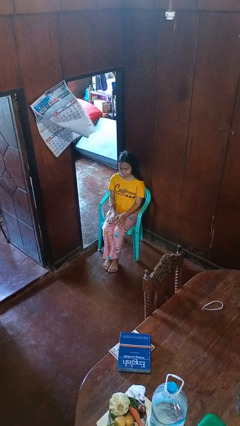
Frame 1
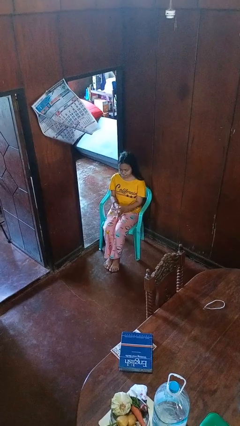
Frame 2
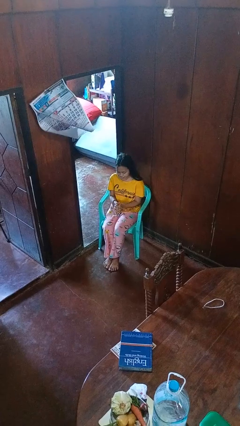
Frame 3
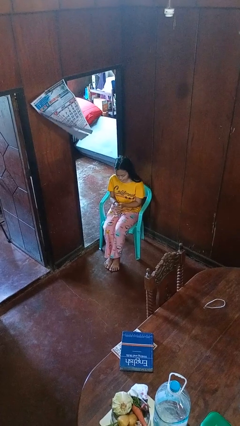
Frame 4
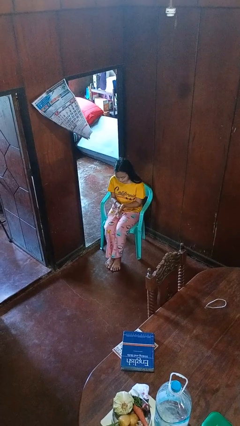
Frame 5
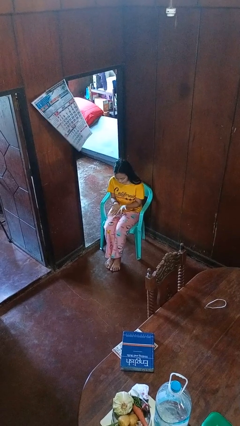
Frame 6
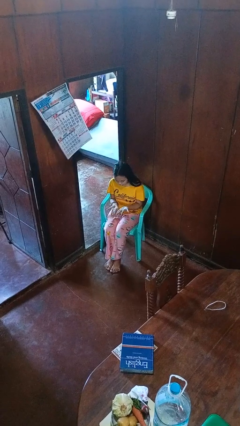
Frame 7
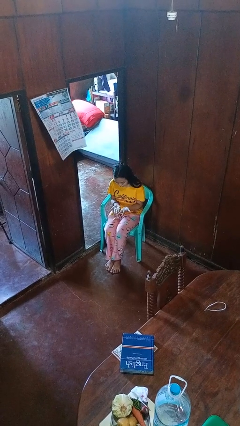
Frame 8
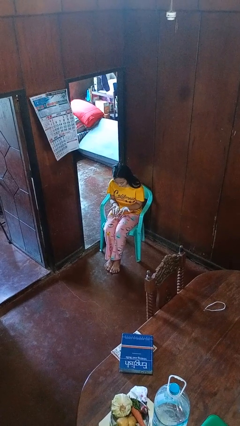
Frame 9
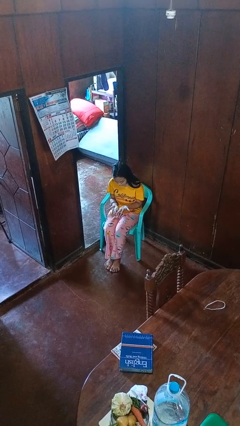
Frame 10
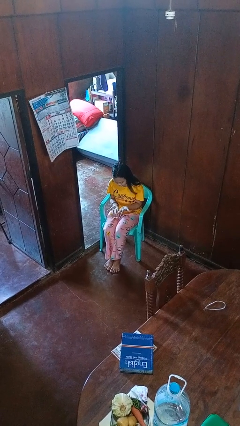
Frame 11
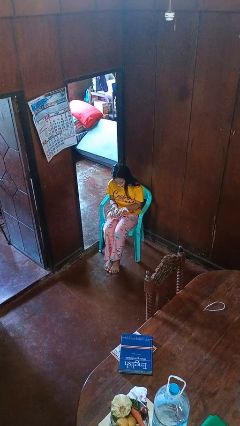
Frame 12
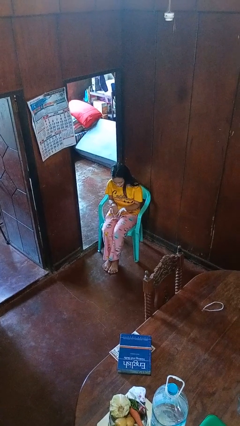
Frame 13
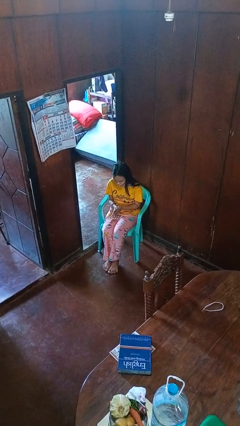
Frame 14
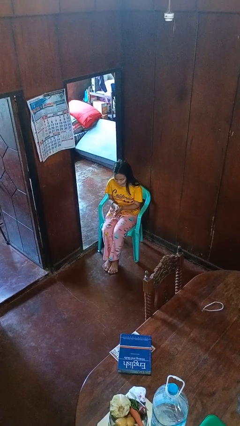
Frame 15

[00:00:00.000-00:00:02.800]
person looks at hands in lap

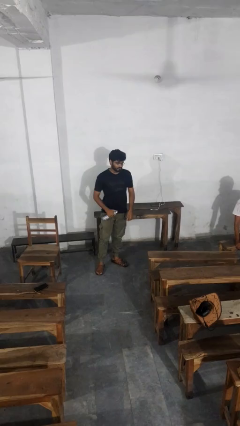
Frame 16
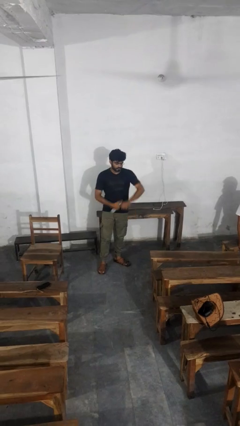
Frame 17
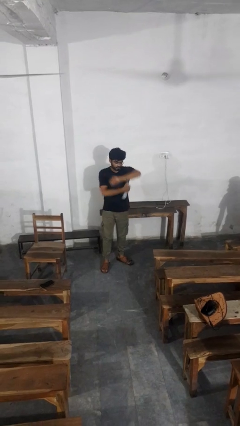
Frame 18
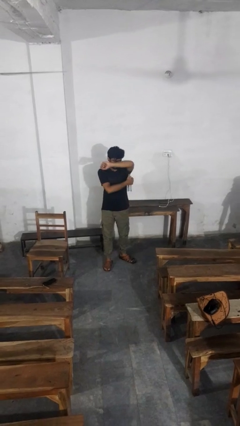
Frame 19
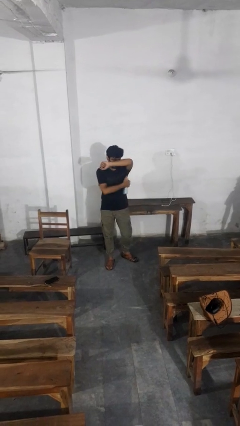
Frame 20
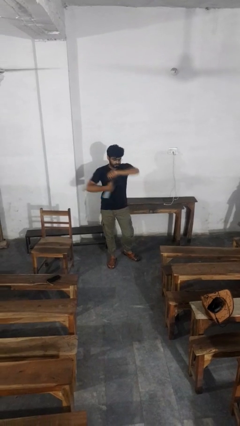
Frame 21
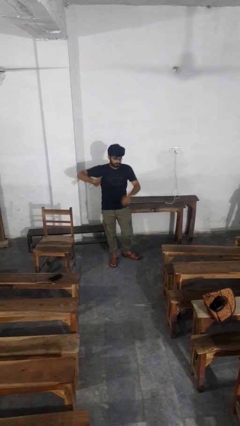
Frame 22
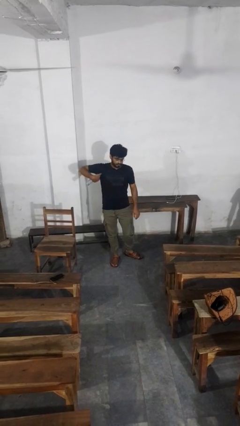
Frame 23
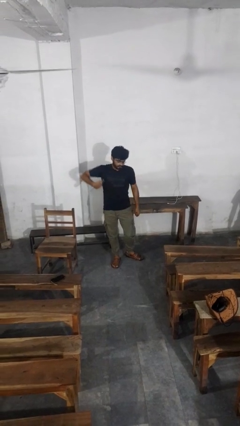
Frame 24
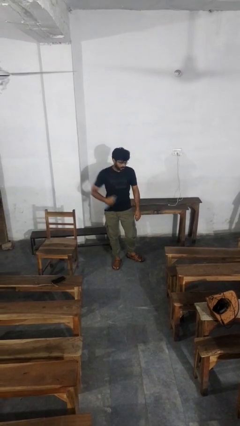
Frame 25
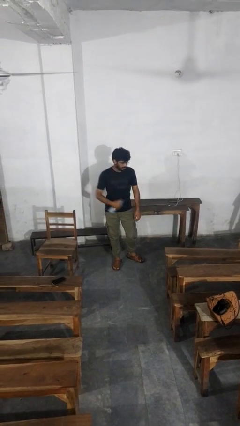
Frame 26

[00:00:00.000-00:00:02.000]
person applies deodorant

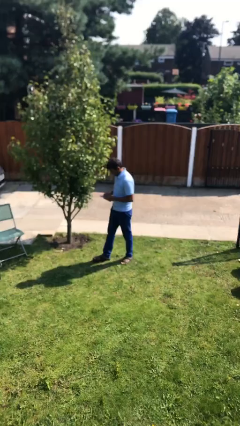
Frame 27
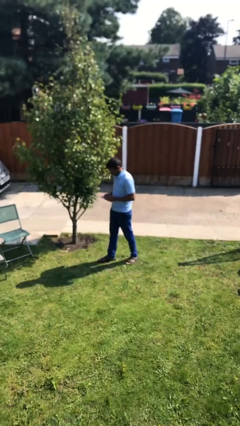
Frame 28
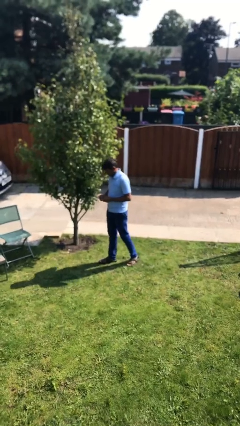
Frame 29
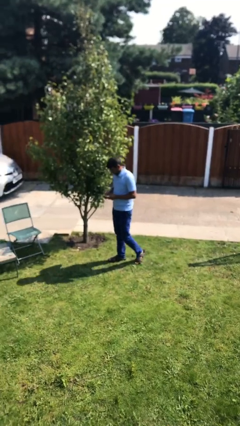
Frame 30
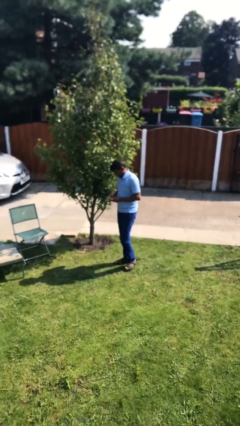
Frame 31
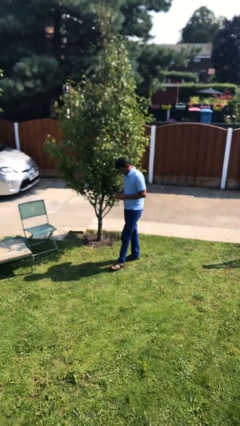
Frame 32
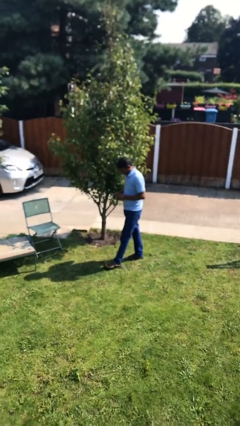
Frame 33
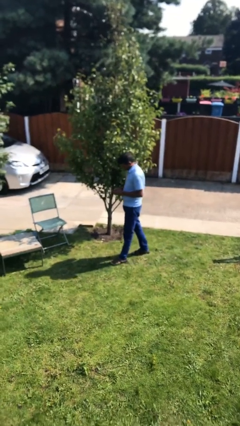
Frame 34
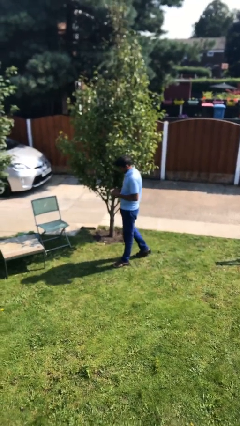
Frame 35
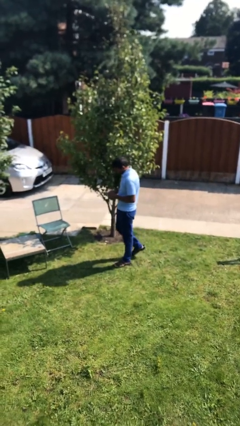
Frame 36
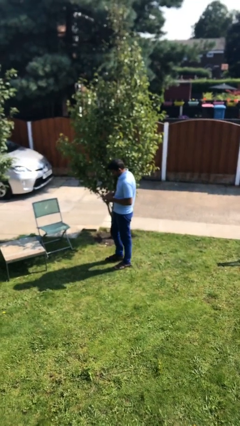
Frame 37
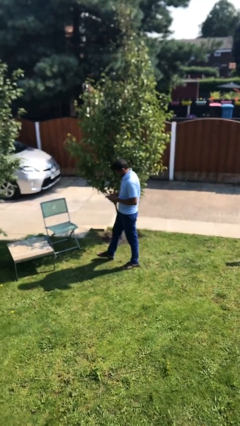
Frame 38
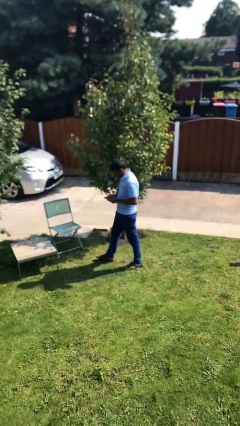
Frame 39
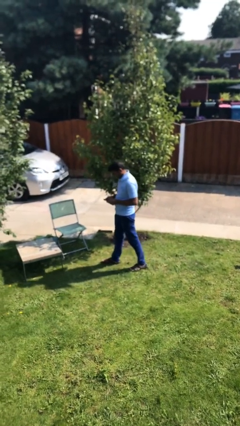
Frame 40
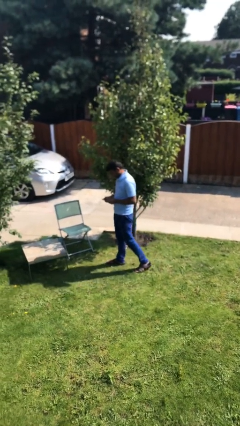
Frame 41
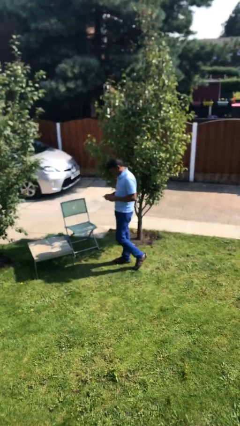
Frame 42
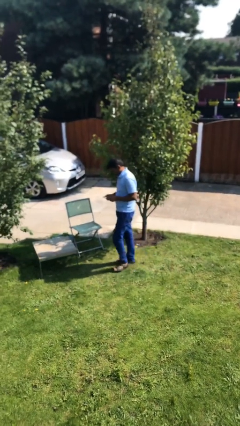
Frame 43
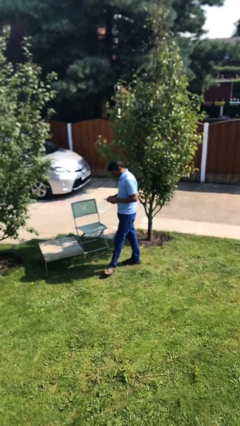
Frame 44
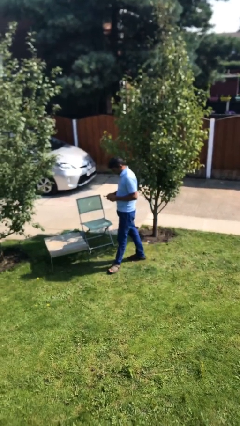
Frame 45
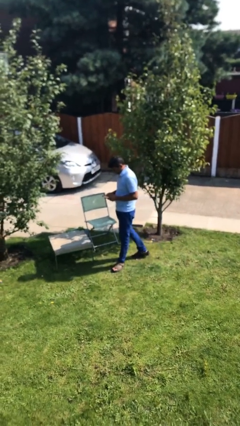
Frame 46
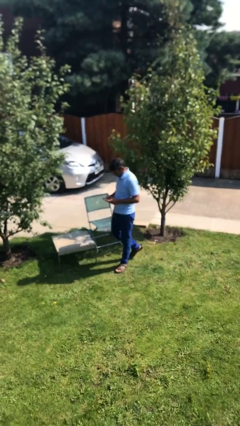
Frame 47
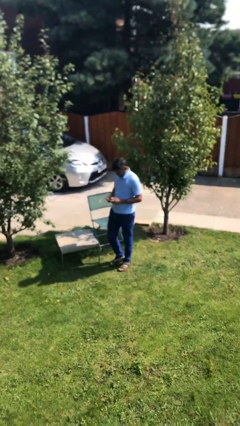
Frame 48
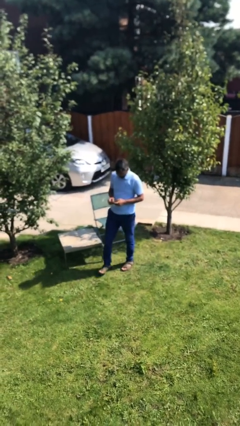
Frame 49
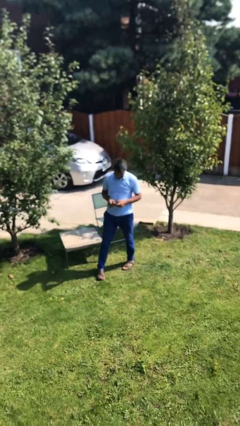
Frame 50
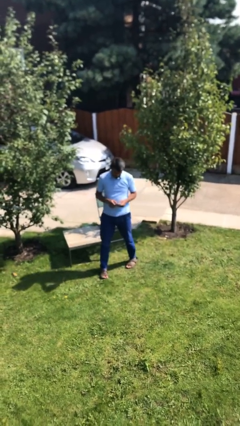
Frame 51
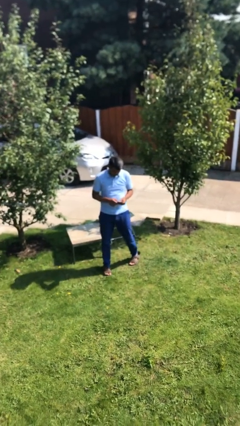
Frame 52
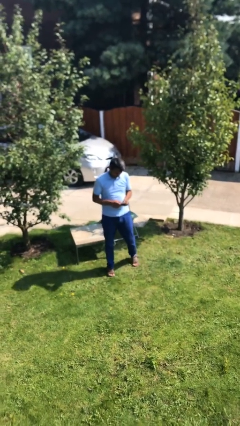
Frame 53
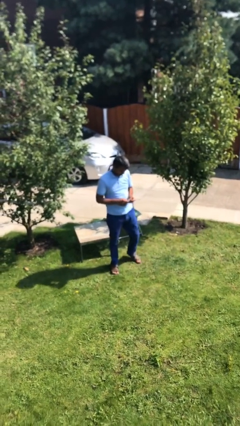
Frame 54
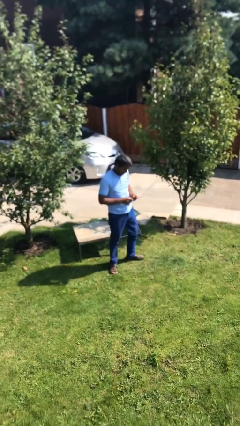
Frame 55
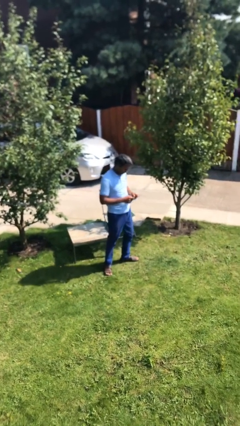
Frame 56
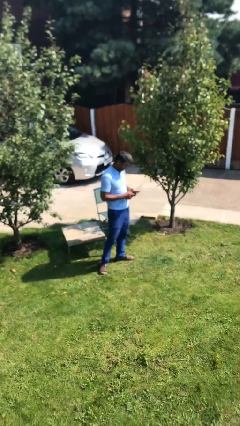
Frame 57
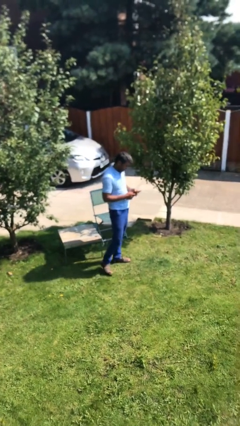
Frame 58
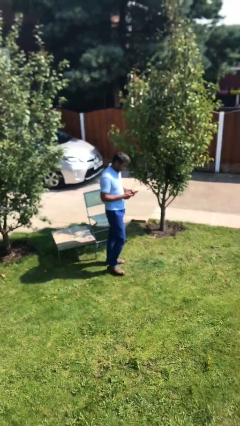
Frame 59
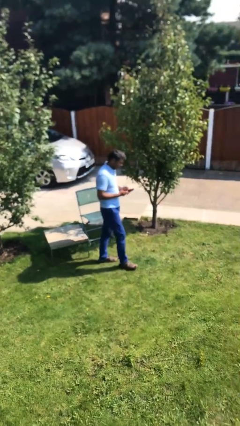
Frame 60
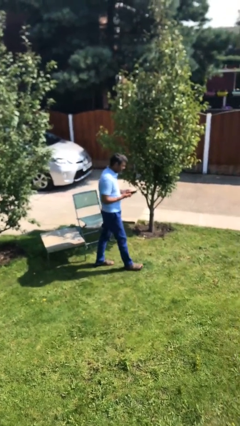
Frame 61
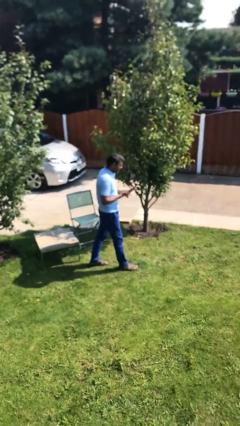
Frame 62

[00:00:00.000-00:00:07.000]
person texts on phone

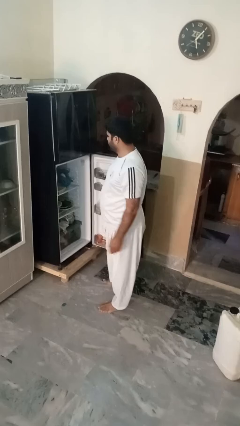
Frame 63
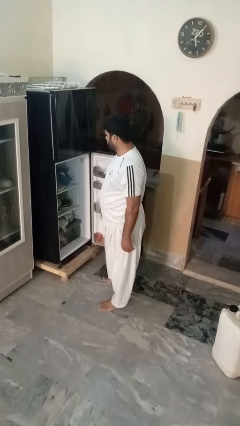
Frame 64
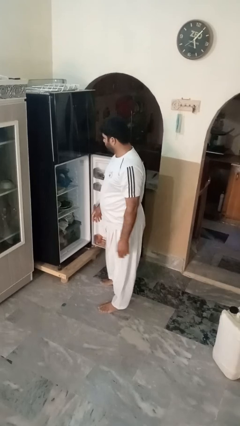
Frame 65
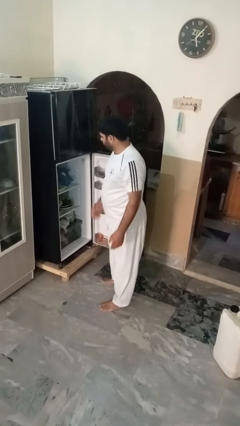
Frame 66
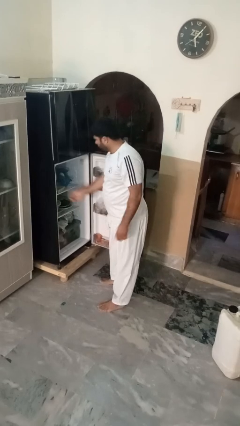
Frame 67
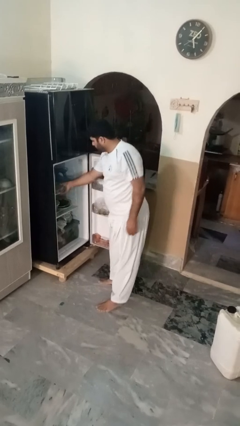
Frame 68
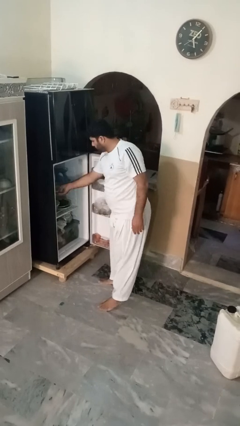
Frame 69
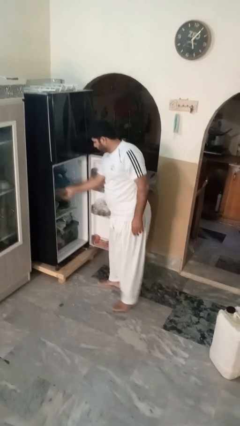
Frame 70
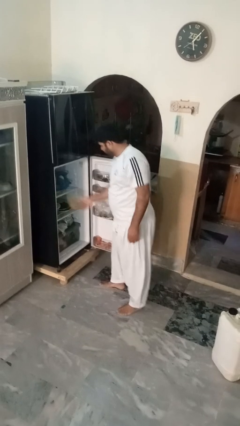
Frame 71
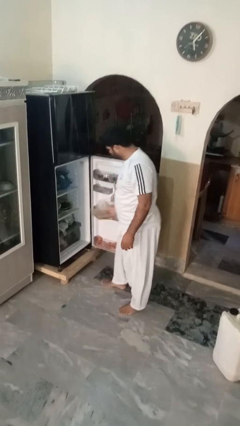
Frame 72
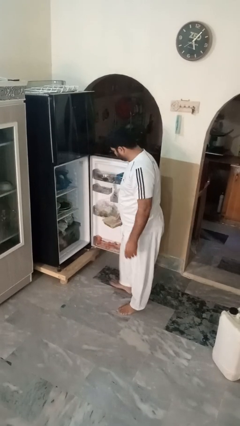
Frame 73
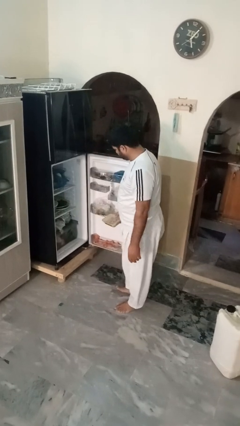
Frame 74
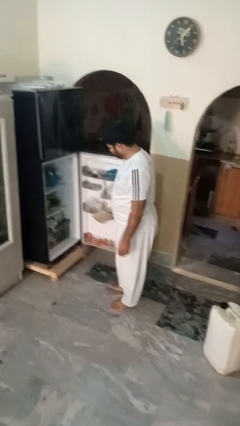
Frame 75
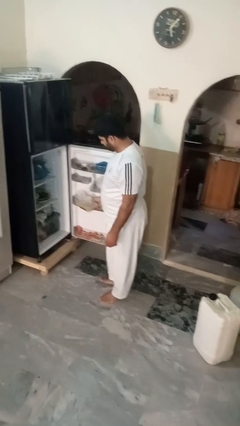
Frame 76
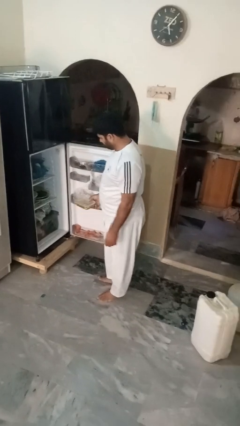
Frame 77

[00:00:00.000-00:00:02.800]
person takes object from refrigerator

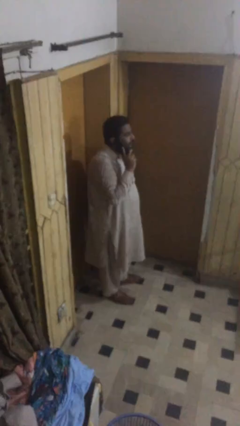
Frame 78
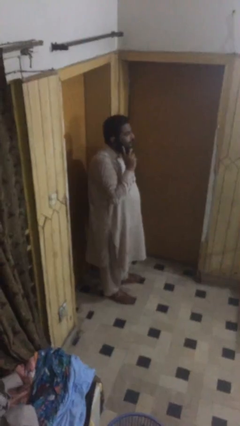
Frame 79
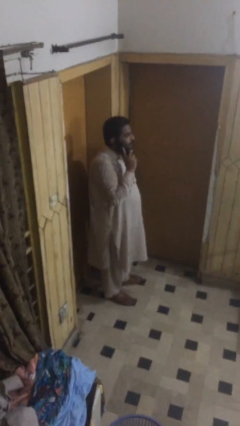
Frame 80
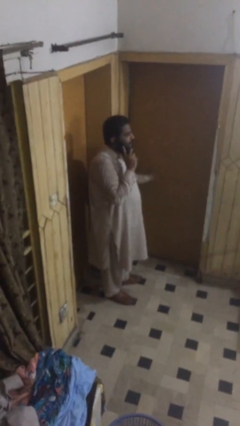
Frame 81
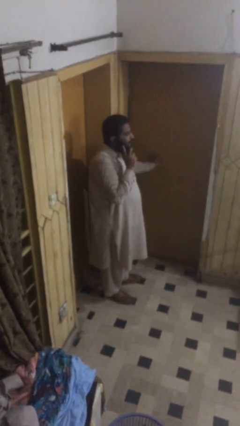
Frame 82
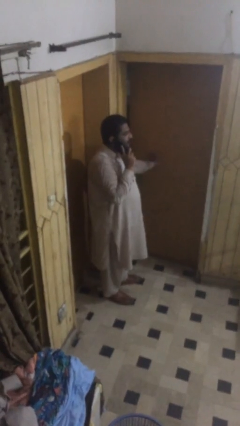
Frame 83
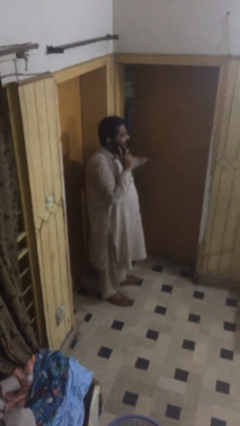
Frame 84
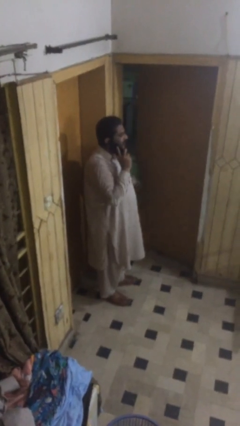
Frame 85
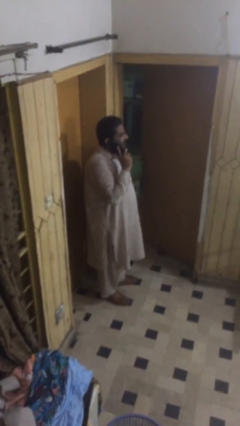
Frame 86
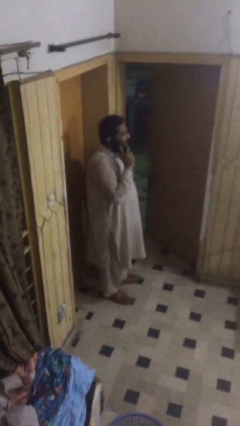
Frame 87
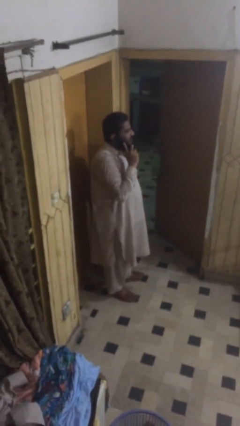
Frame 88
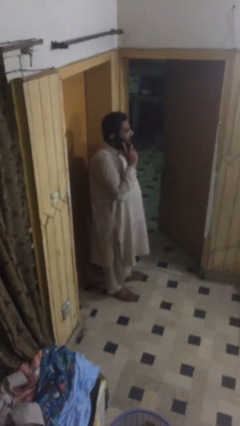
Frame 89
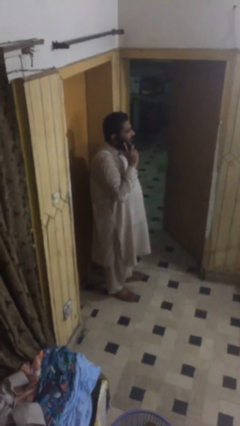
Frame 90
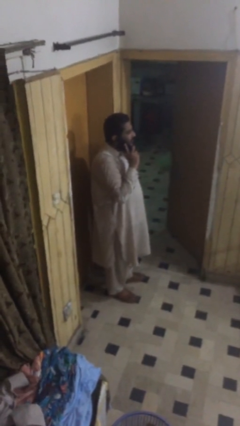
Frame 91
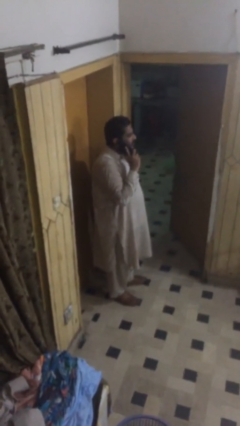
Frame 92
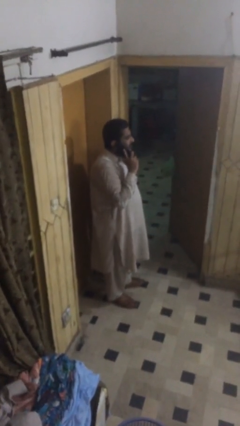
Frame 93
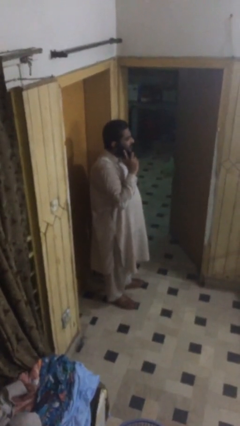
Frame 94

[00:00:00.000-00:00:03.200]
person opens facility door
